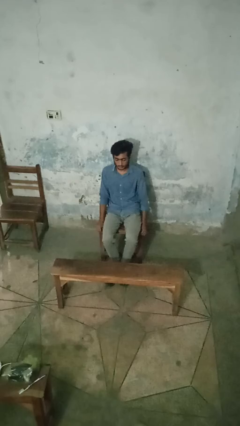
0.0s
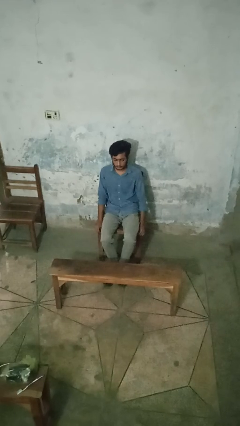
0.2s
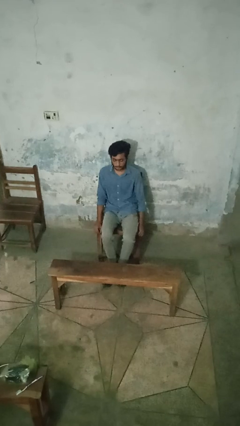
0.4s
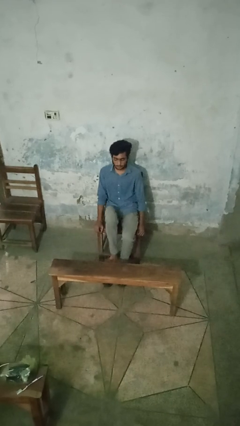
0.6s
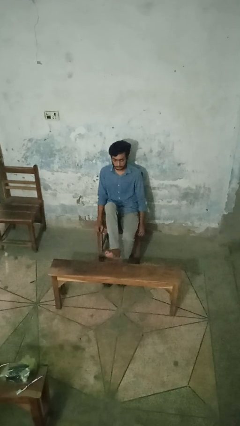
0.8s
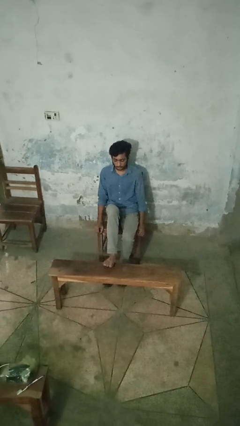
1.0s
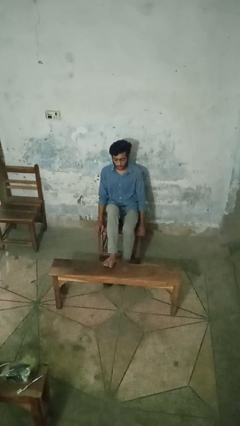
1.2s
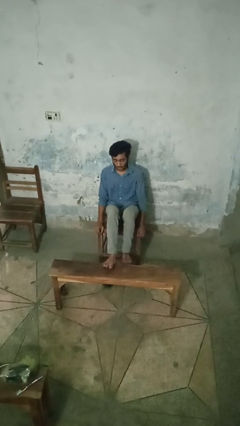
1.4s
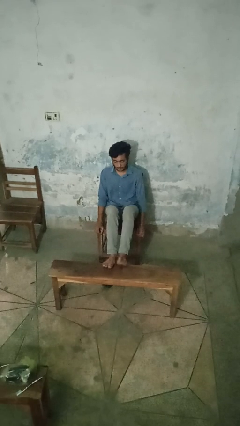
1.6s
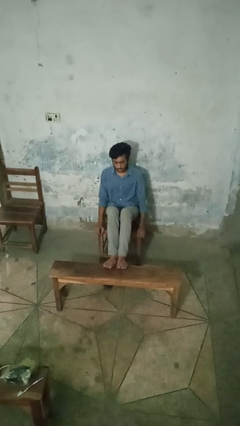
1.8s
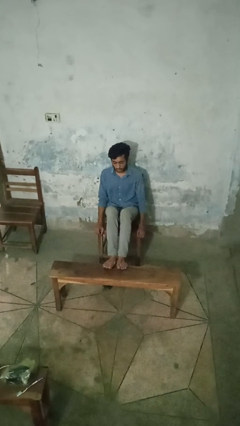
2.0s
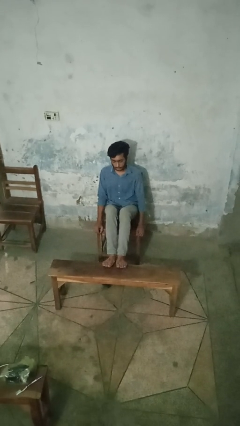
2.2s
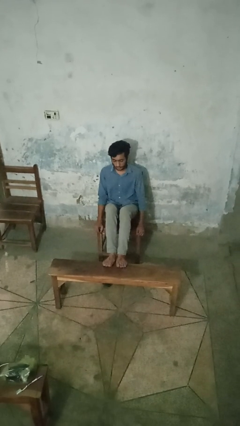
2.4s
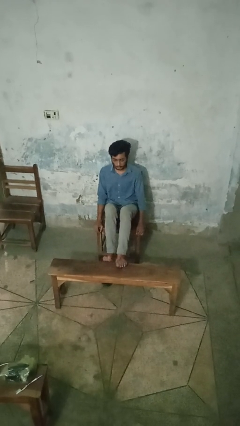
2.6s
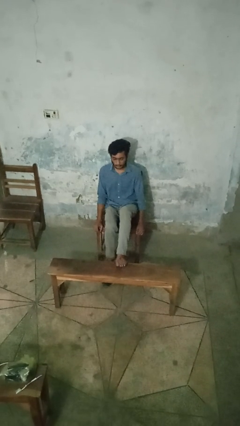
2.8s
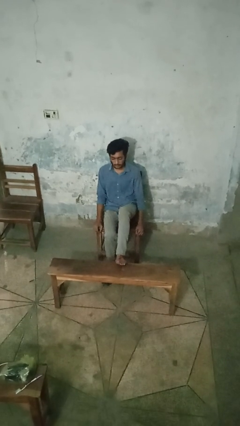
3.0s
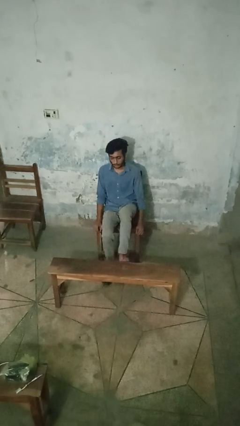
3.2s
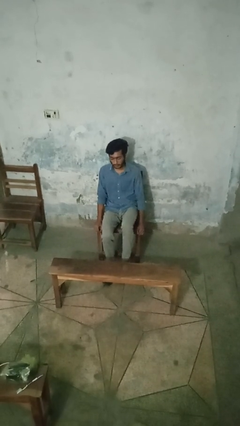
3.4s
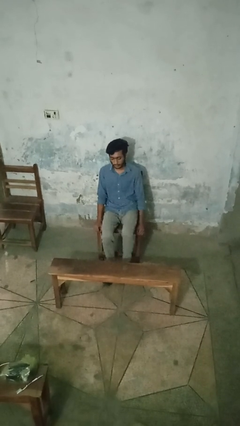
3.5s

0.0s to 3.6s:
person puts feet up

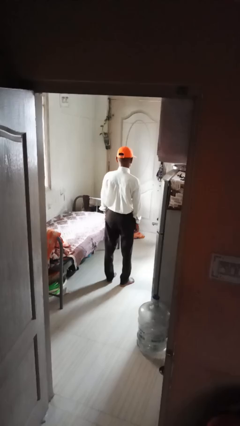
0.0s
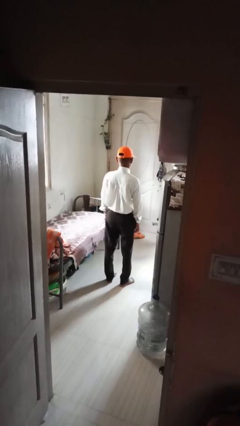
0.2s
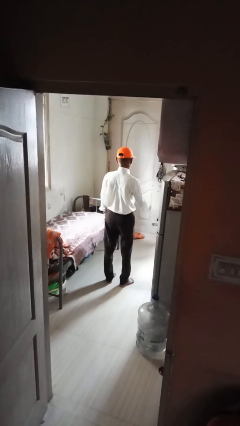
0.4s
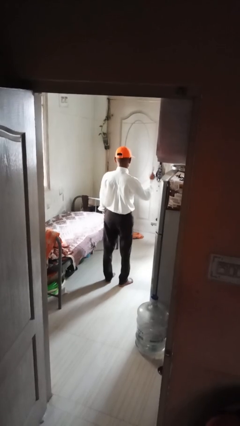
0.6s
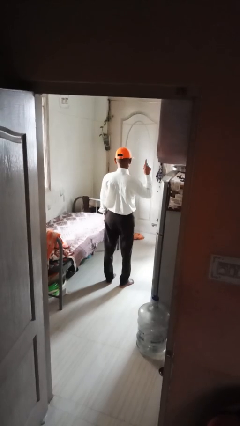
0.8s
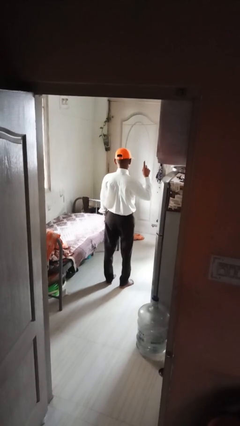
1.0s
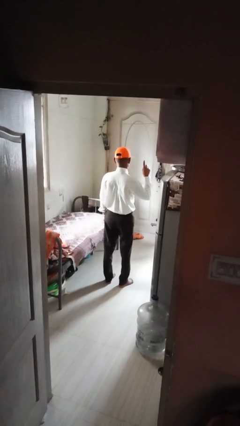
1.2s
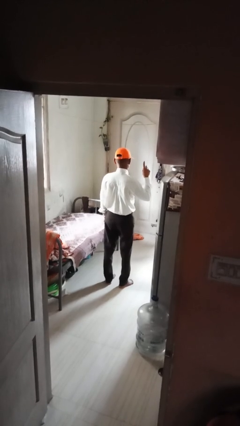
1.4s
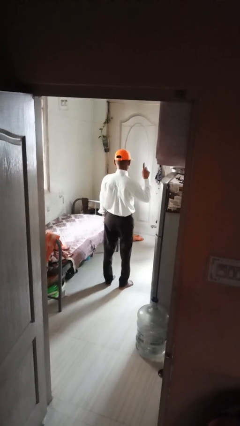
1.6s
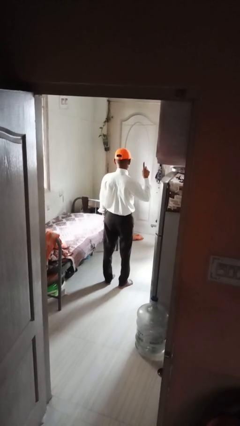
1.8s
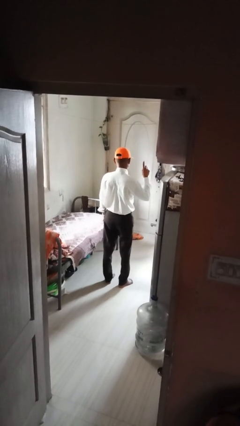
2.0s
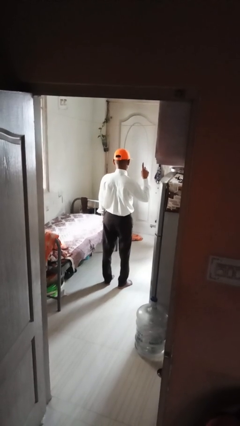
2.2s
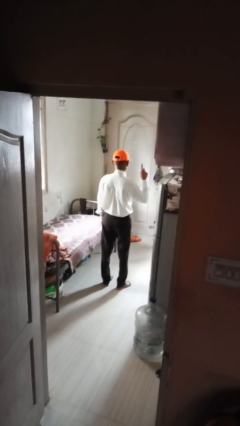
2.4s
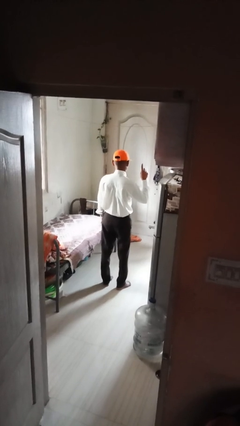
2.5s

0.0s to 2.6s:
person gestures number one

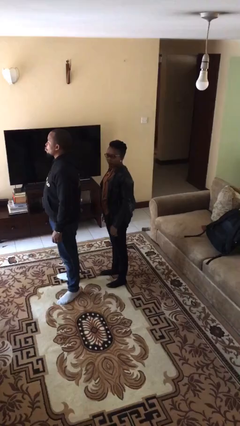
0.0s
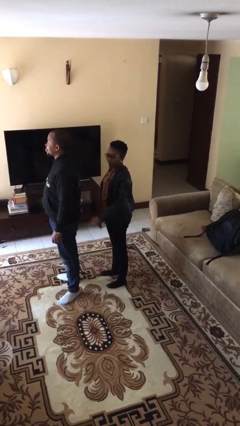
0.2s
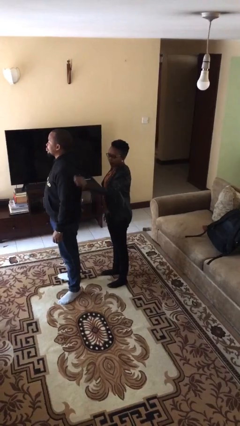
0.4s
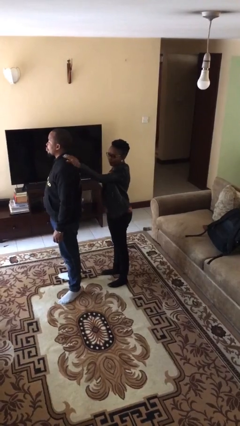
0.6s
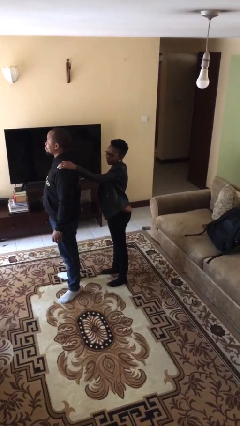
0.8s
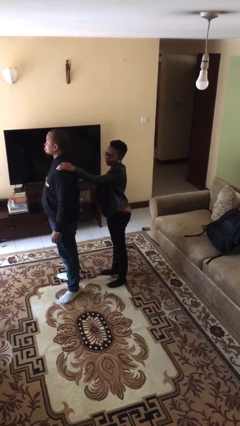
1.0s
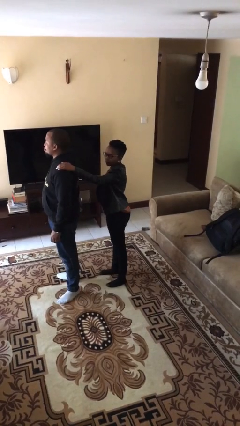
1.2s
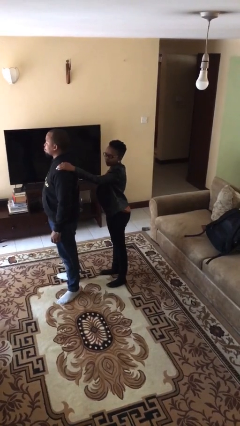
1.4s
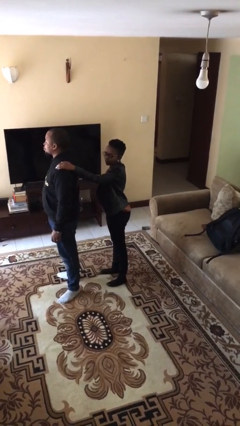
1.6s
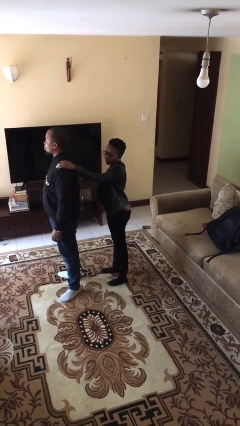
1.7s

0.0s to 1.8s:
person grabs person by shoulder

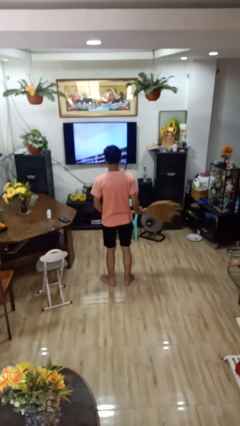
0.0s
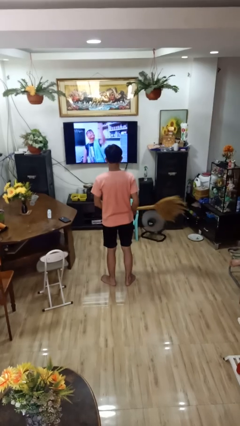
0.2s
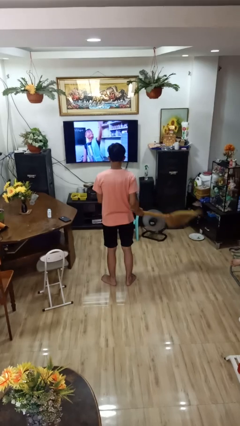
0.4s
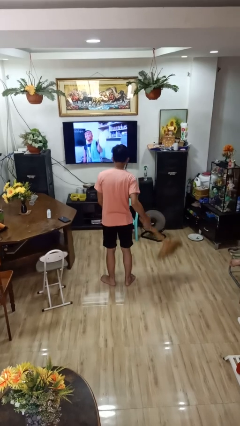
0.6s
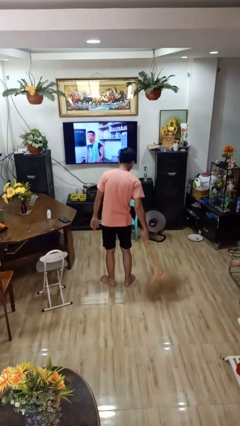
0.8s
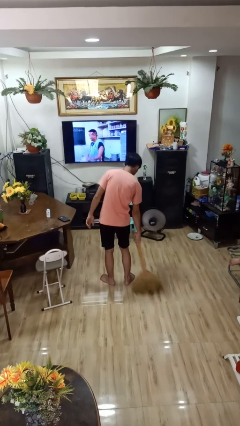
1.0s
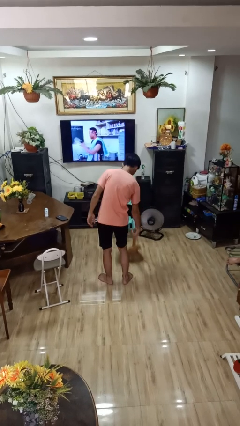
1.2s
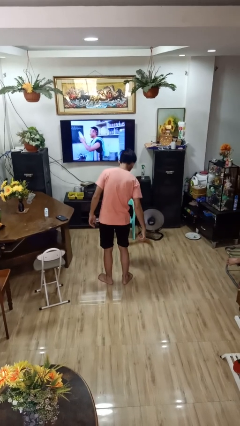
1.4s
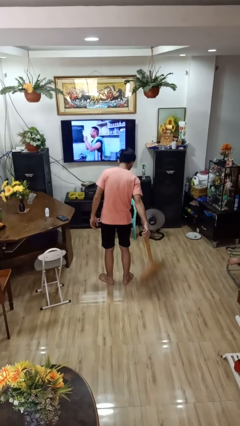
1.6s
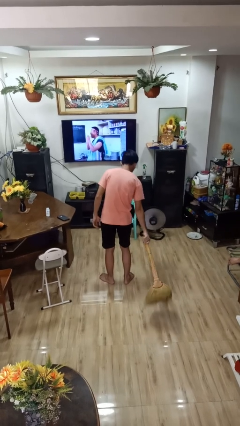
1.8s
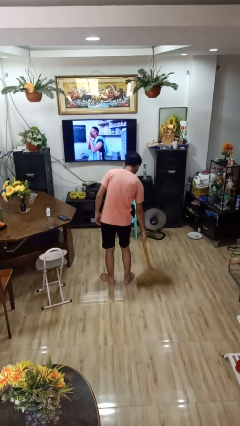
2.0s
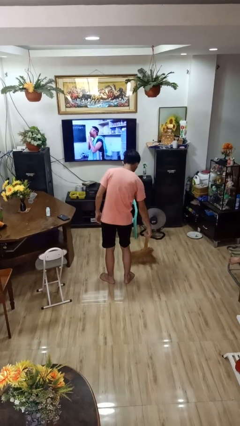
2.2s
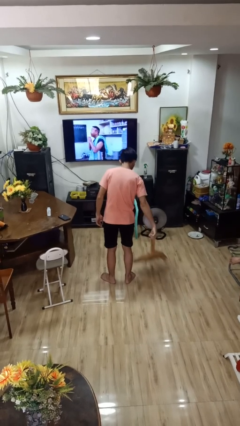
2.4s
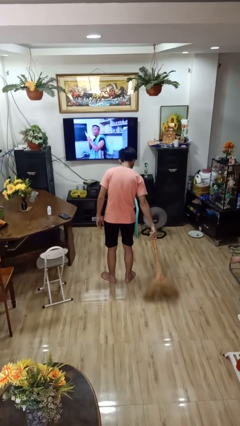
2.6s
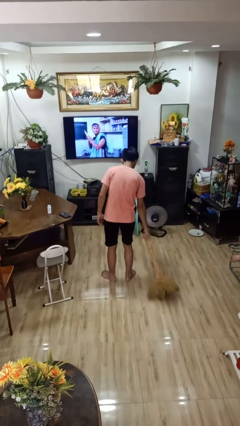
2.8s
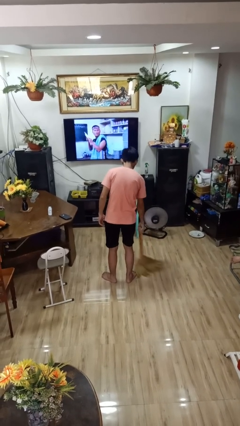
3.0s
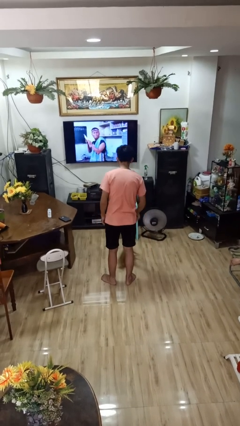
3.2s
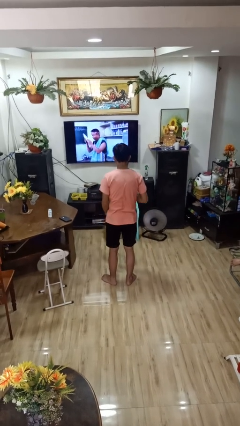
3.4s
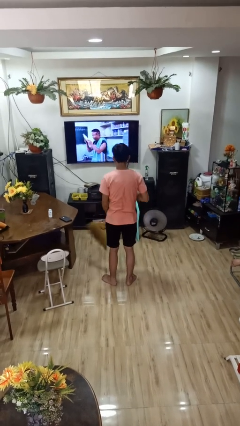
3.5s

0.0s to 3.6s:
person sweeps floor

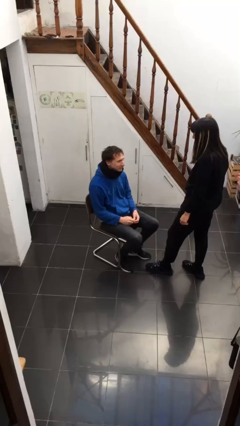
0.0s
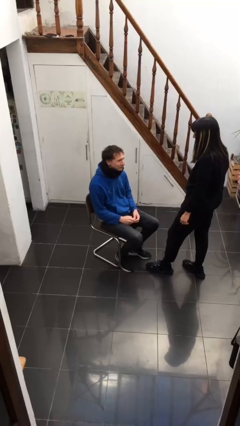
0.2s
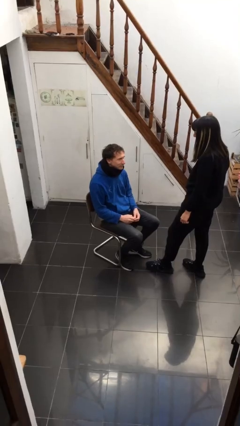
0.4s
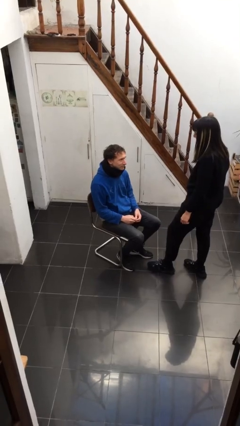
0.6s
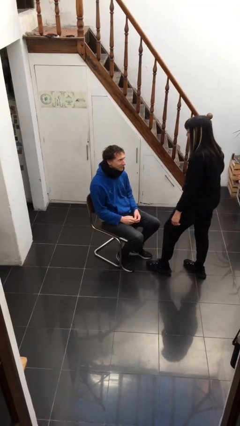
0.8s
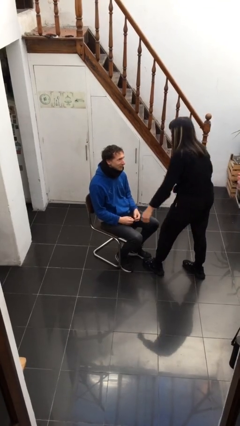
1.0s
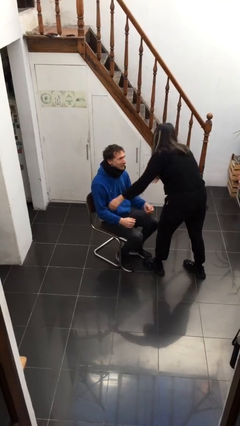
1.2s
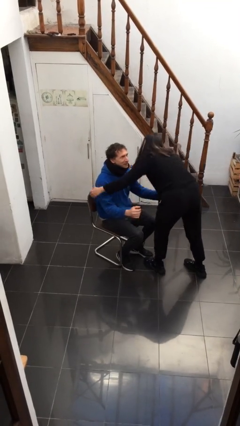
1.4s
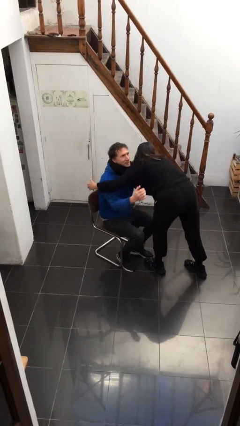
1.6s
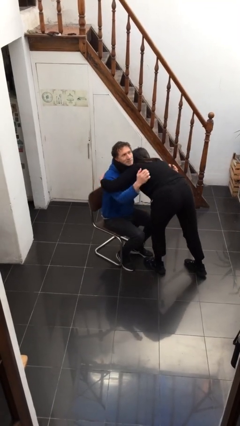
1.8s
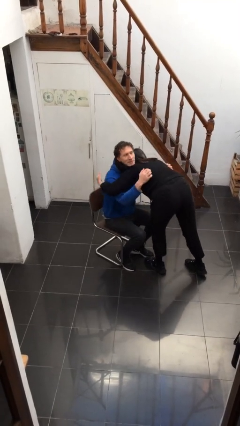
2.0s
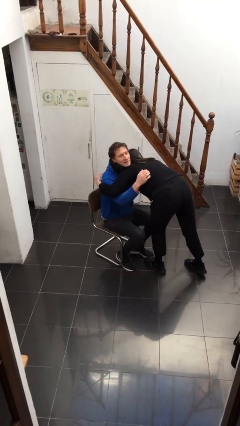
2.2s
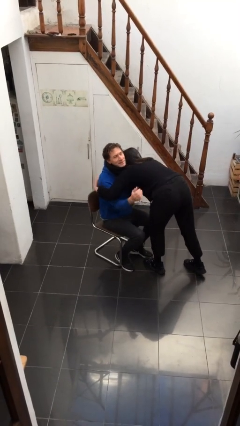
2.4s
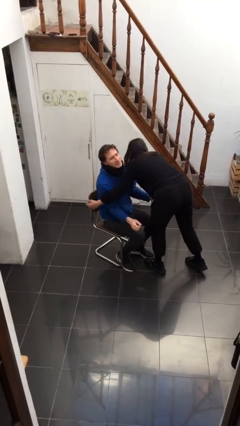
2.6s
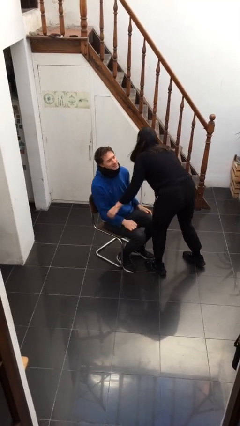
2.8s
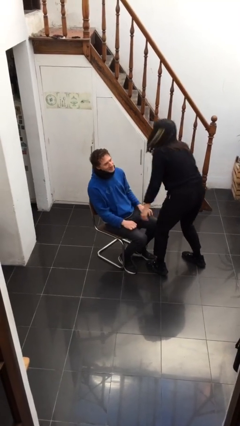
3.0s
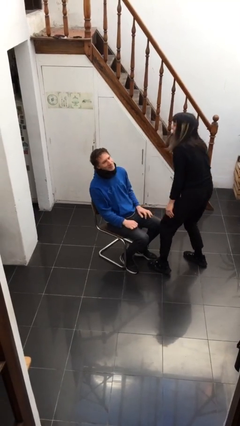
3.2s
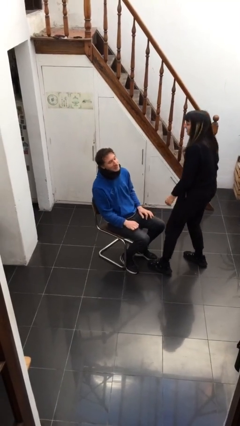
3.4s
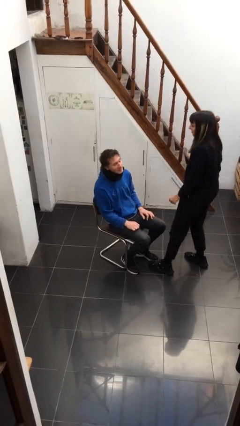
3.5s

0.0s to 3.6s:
person embraces person

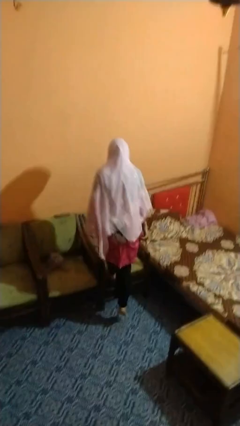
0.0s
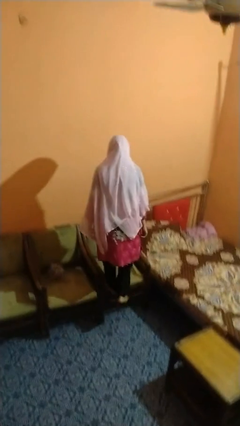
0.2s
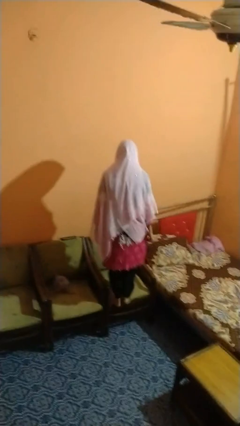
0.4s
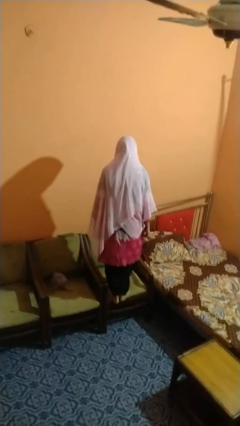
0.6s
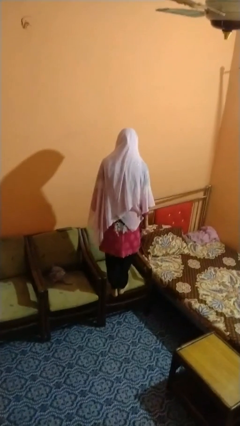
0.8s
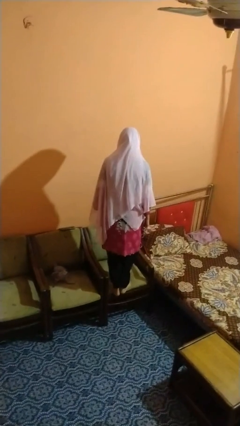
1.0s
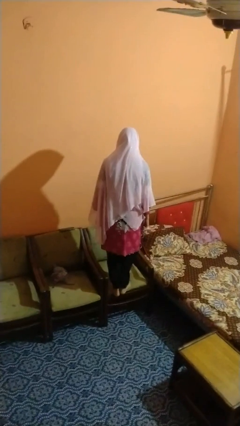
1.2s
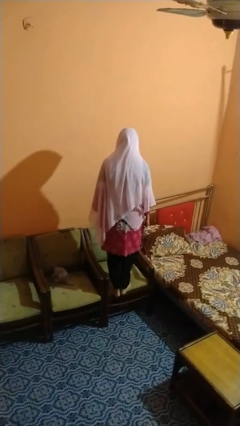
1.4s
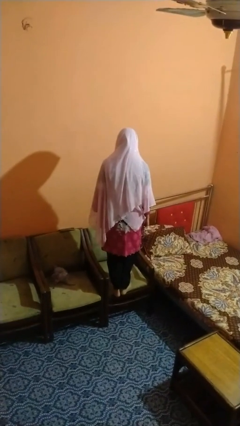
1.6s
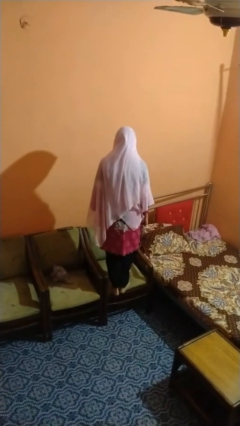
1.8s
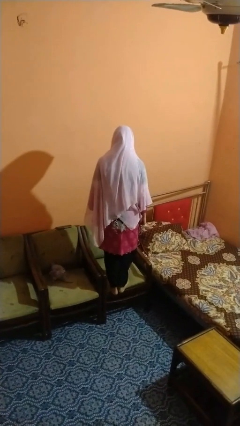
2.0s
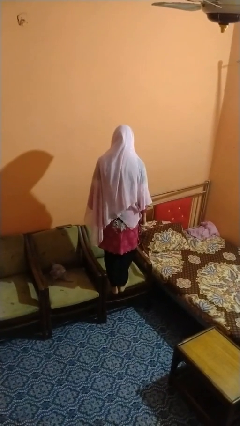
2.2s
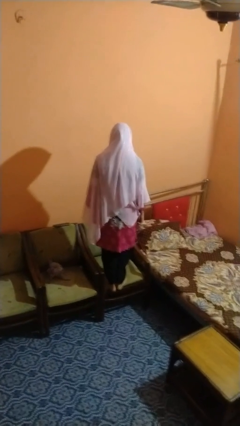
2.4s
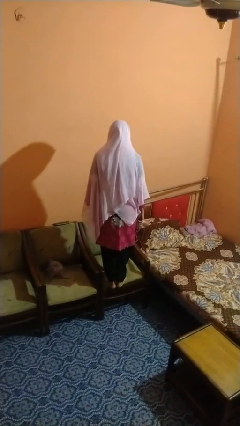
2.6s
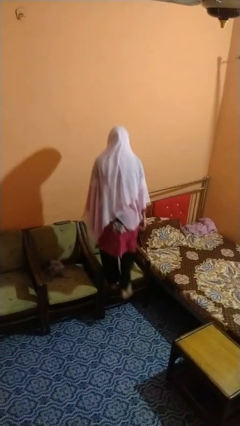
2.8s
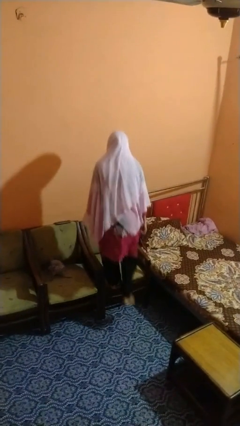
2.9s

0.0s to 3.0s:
person climbs on chair
